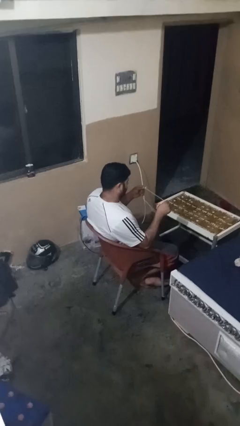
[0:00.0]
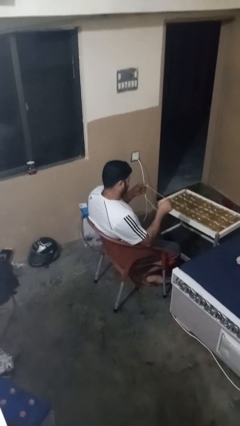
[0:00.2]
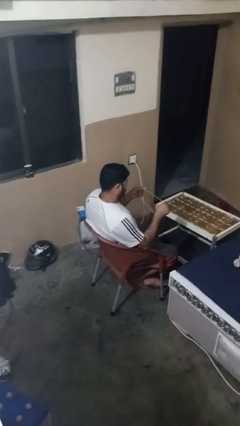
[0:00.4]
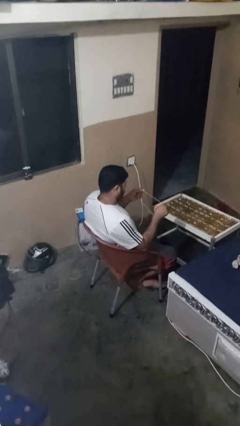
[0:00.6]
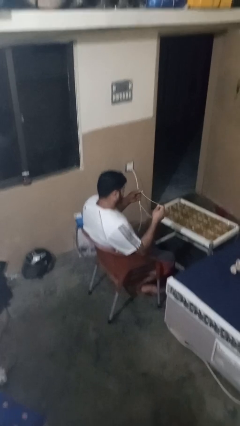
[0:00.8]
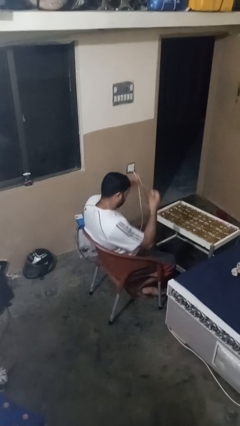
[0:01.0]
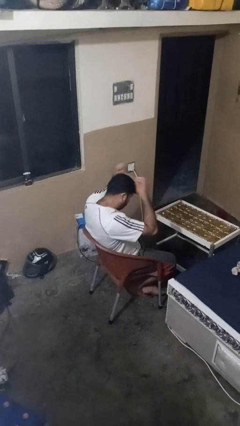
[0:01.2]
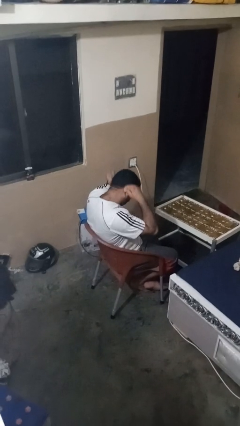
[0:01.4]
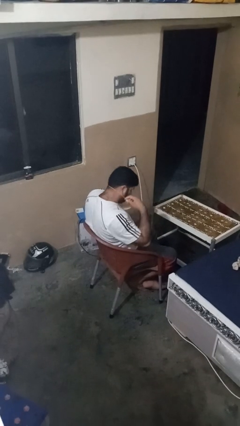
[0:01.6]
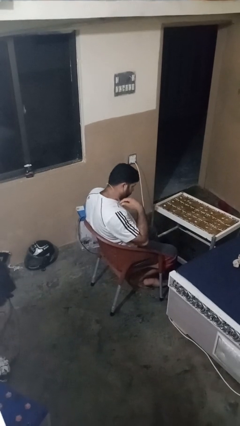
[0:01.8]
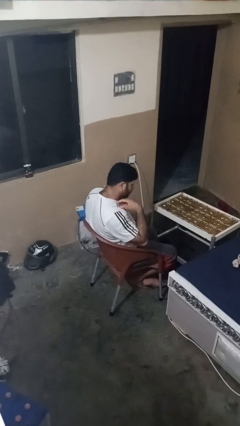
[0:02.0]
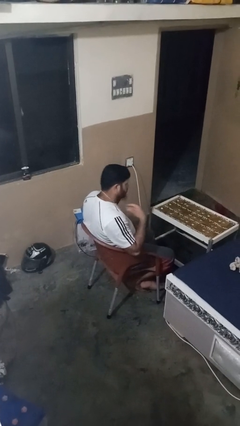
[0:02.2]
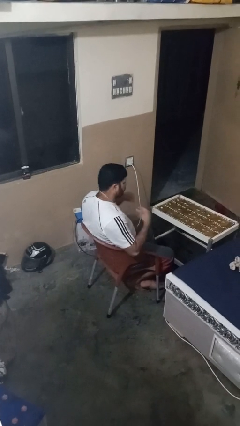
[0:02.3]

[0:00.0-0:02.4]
person puts on necklace

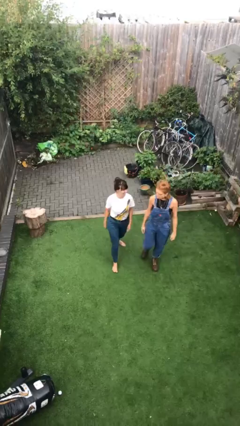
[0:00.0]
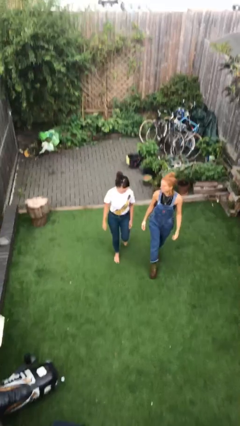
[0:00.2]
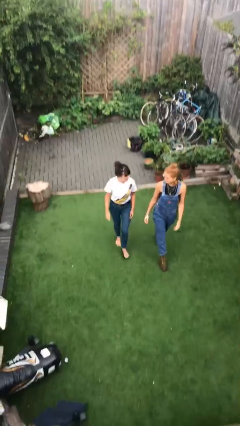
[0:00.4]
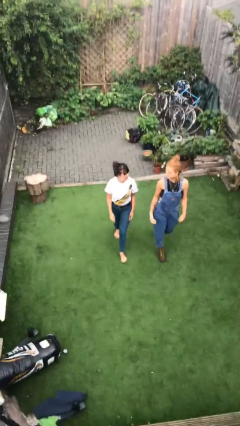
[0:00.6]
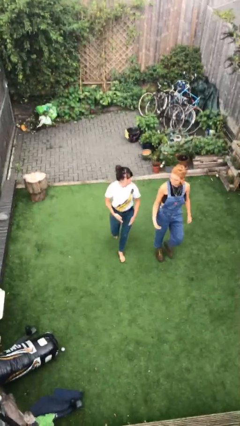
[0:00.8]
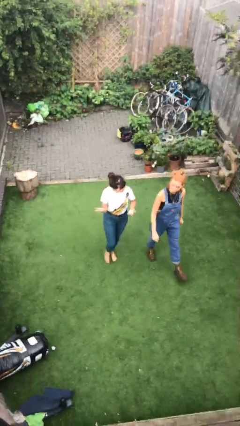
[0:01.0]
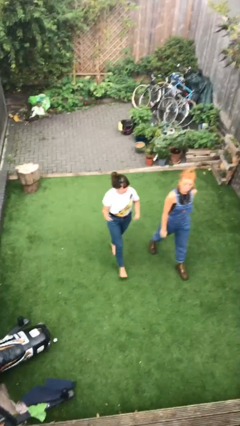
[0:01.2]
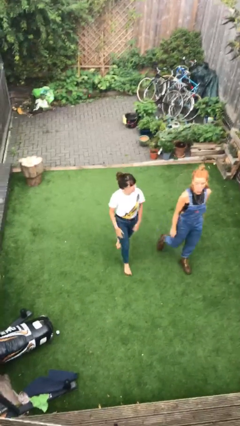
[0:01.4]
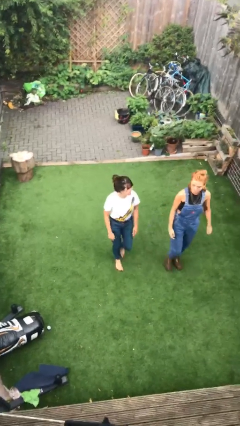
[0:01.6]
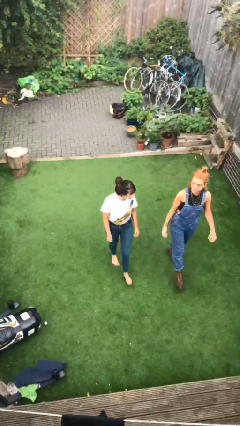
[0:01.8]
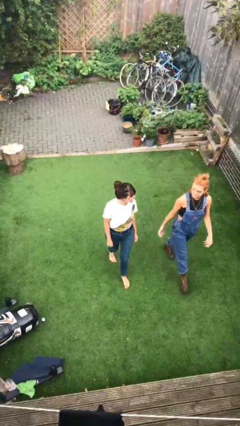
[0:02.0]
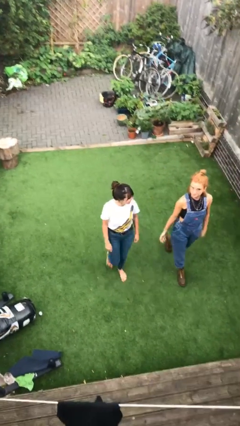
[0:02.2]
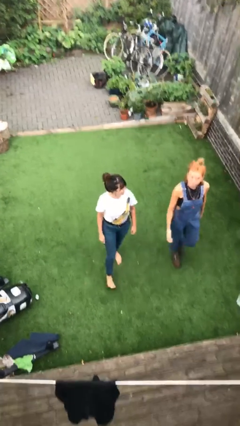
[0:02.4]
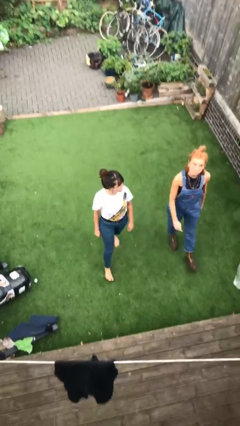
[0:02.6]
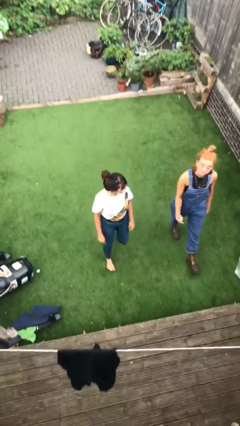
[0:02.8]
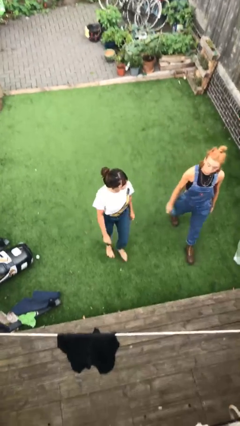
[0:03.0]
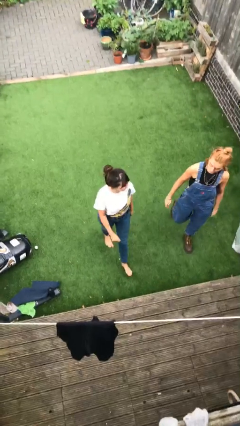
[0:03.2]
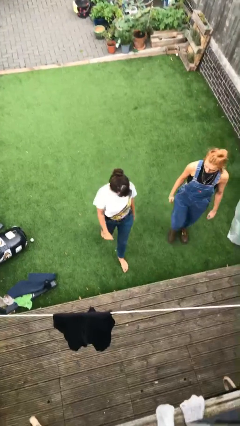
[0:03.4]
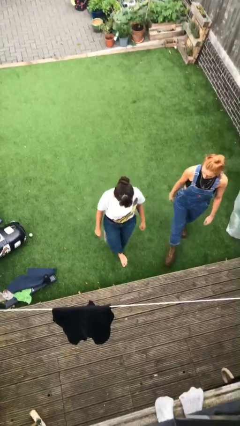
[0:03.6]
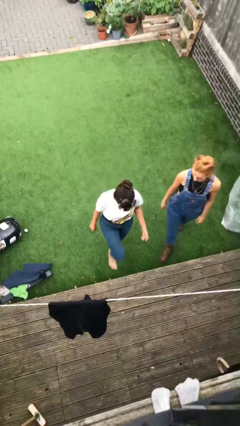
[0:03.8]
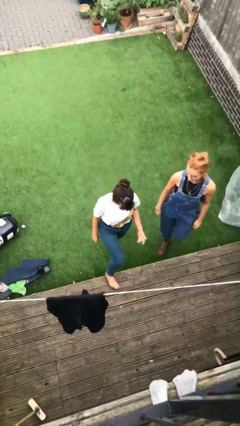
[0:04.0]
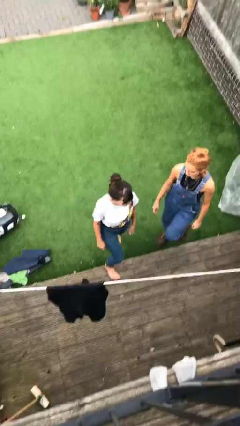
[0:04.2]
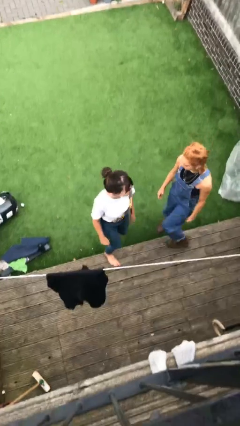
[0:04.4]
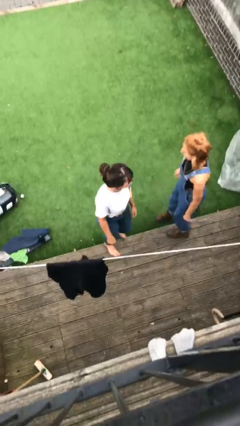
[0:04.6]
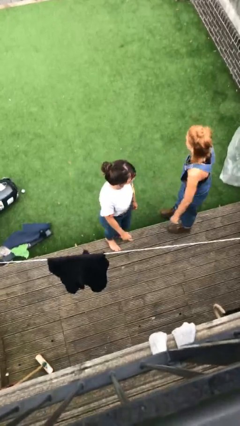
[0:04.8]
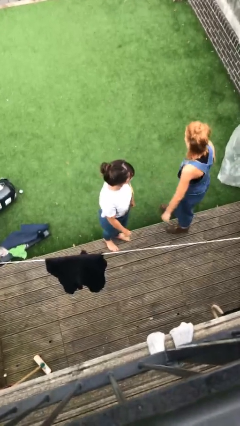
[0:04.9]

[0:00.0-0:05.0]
person talks to person

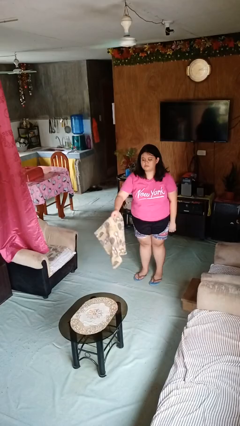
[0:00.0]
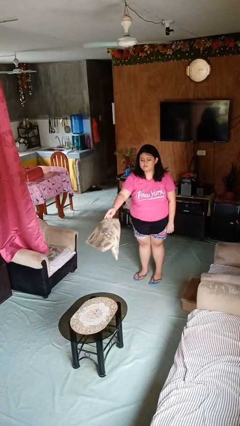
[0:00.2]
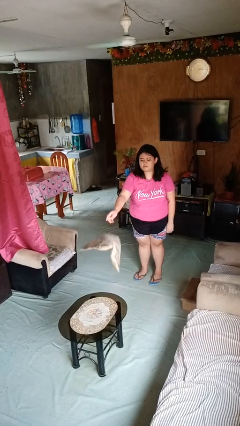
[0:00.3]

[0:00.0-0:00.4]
person throws object on table

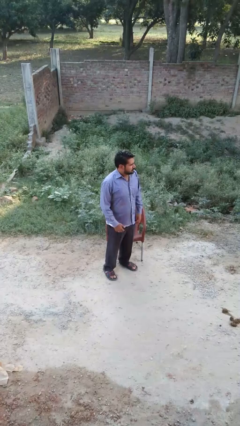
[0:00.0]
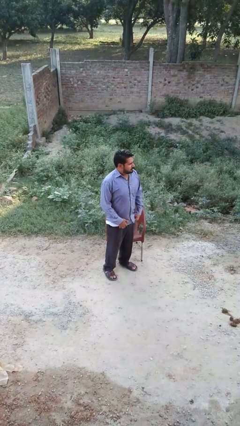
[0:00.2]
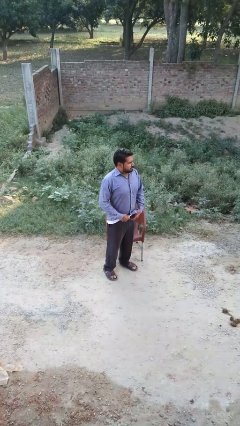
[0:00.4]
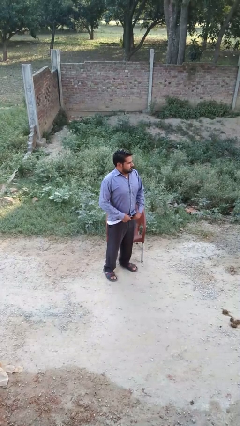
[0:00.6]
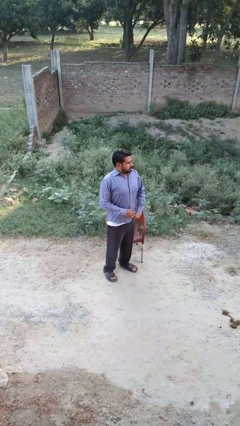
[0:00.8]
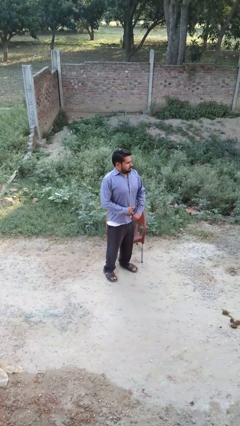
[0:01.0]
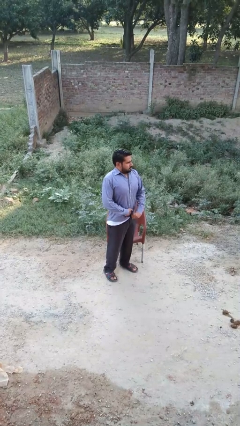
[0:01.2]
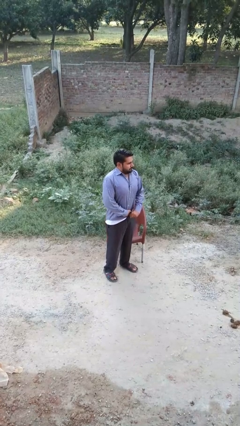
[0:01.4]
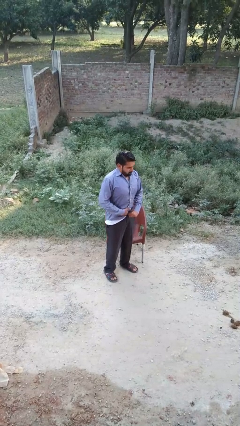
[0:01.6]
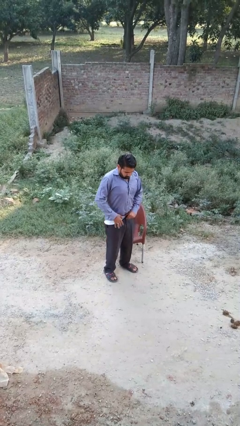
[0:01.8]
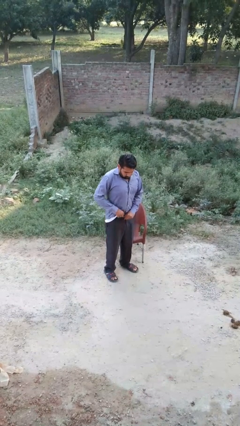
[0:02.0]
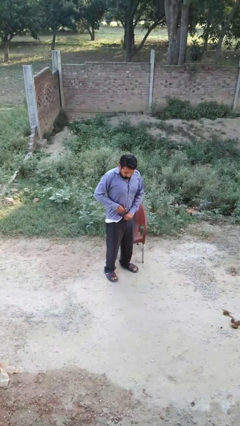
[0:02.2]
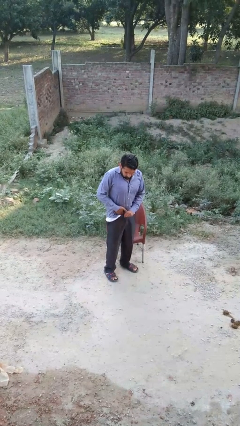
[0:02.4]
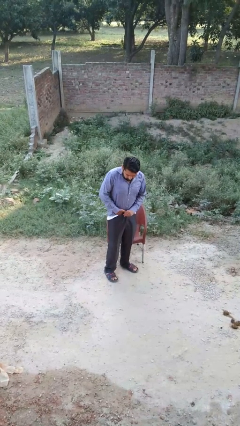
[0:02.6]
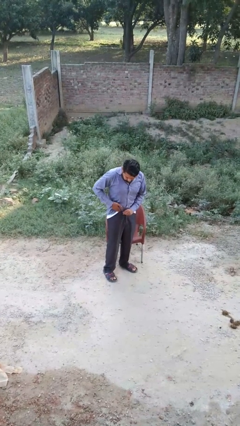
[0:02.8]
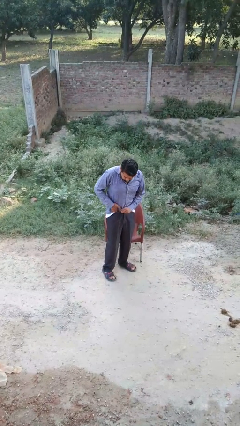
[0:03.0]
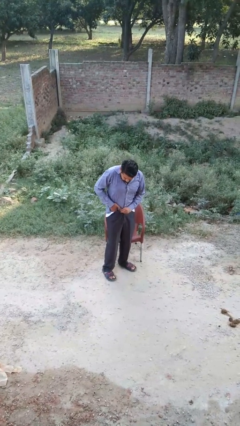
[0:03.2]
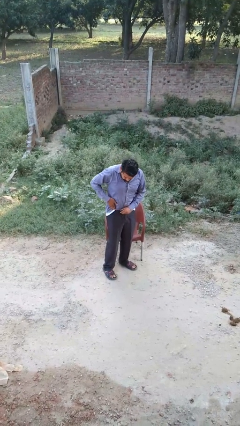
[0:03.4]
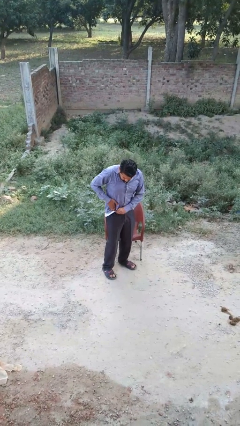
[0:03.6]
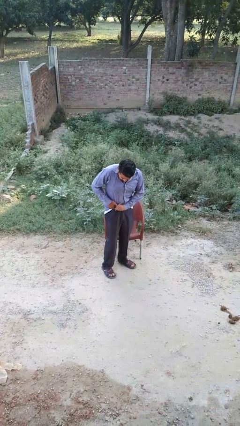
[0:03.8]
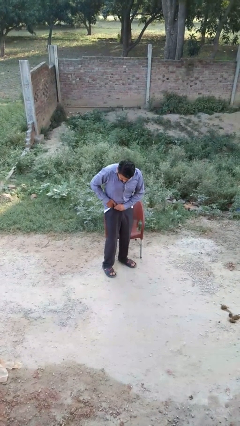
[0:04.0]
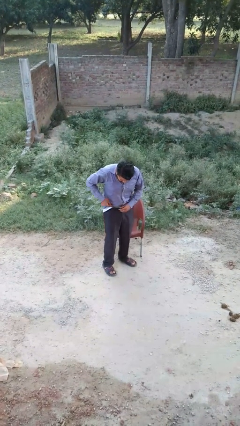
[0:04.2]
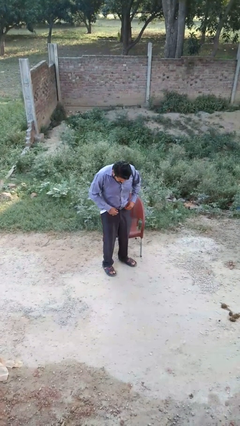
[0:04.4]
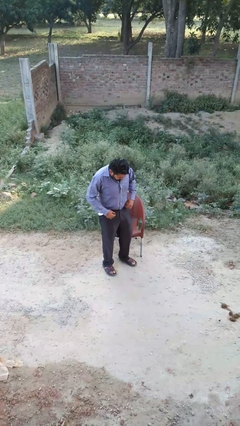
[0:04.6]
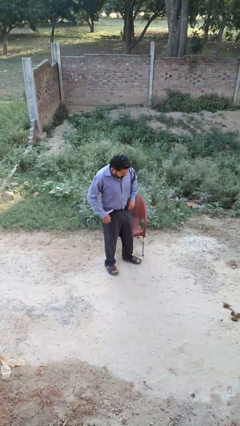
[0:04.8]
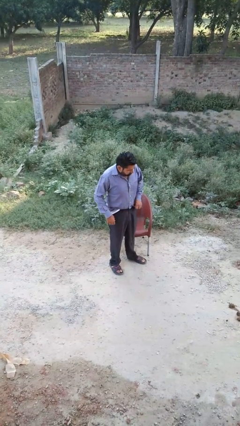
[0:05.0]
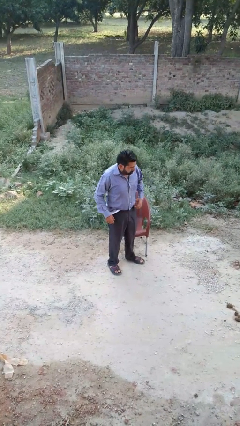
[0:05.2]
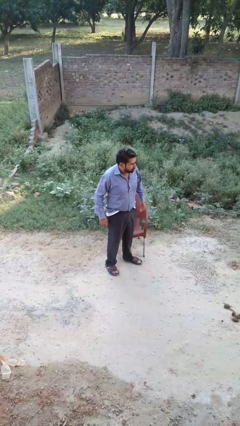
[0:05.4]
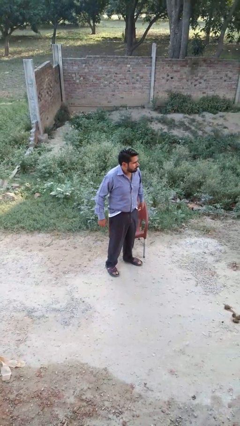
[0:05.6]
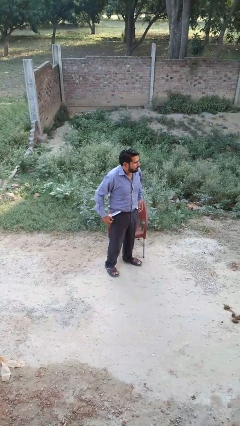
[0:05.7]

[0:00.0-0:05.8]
person tucks in shirt

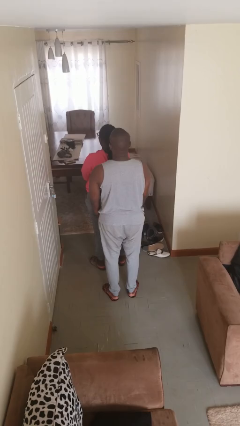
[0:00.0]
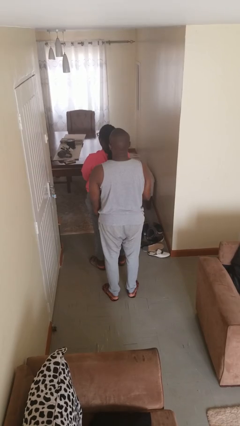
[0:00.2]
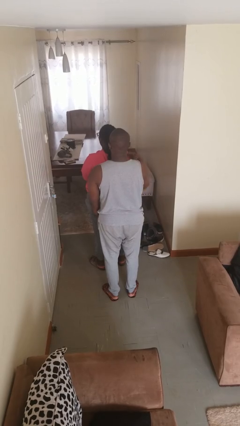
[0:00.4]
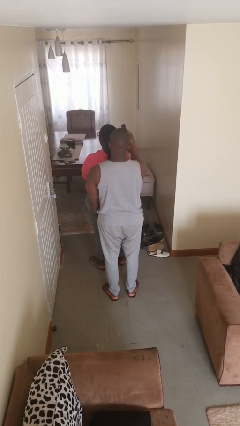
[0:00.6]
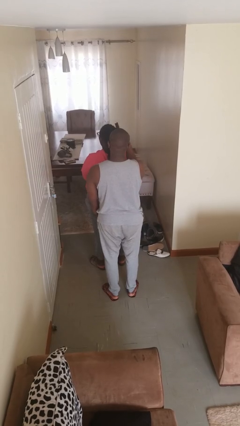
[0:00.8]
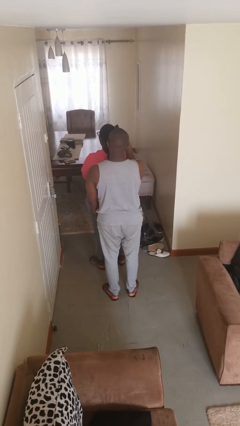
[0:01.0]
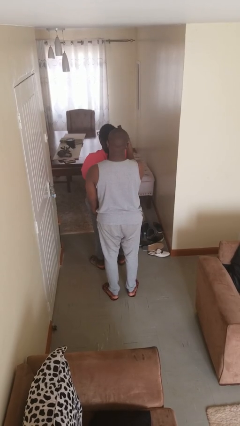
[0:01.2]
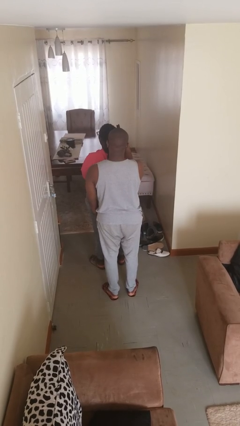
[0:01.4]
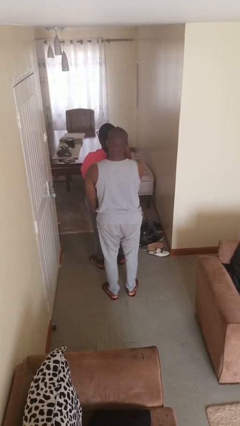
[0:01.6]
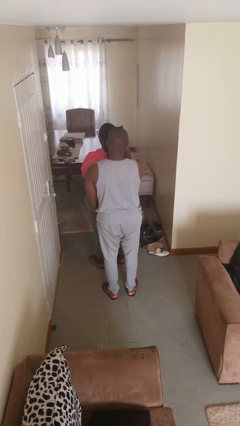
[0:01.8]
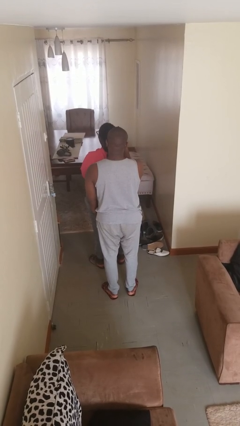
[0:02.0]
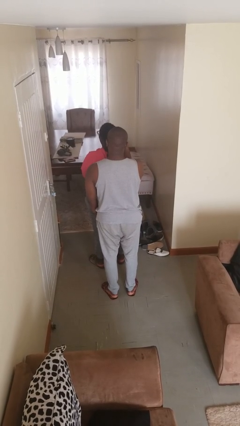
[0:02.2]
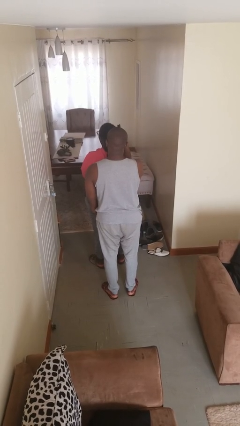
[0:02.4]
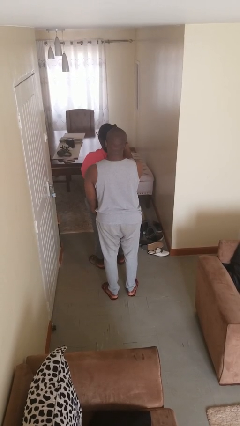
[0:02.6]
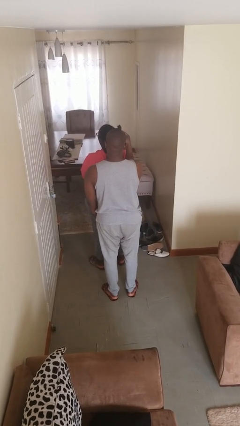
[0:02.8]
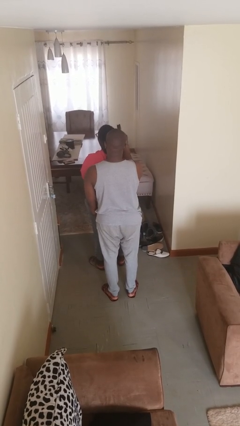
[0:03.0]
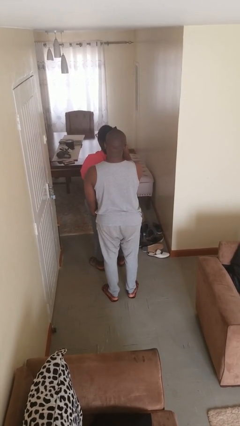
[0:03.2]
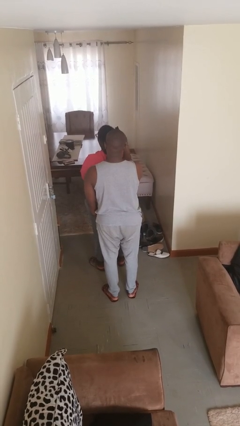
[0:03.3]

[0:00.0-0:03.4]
person brushes hair of person

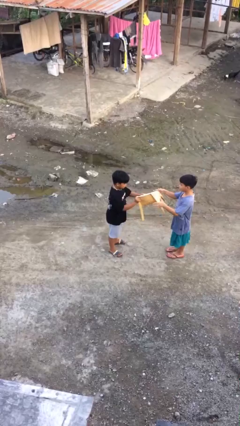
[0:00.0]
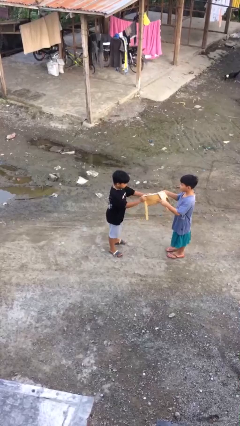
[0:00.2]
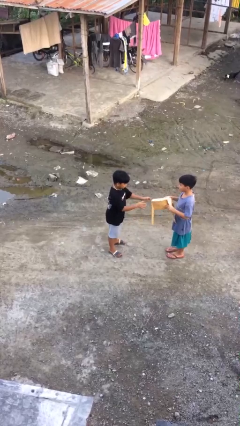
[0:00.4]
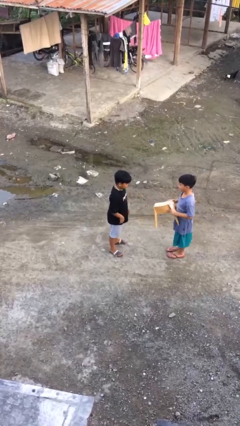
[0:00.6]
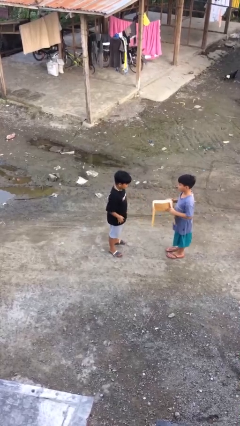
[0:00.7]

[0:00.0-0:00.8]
person transfers object to person
